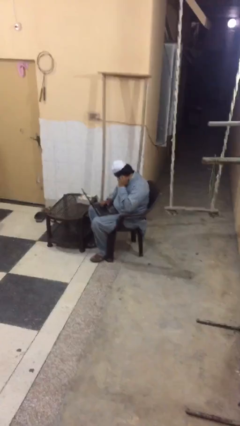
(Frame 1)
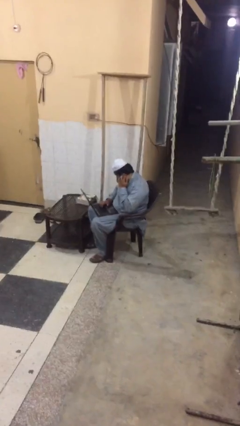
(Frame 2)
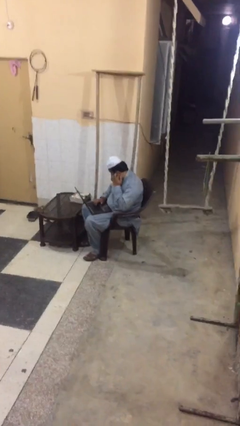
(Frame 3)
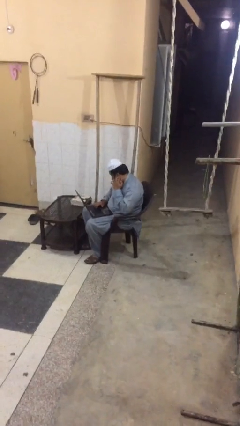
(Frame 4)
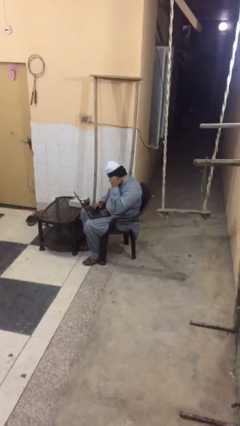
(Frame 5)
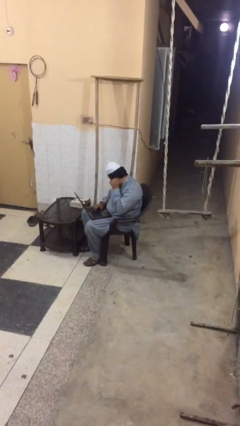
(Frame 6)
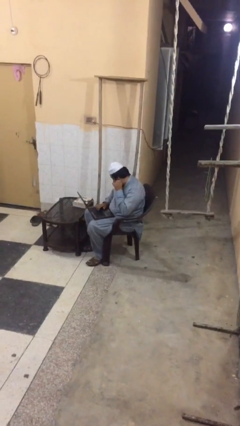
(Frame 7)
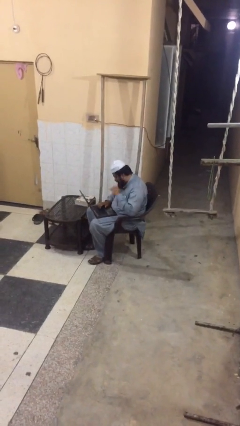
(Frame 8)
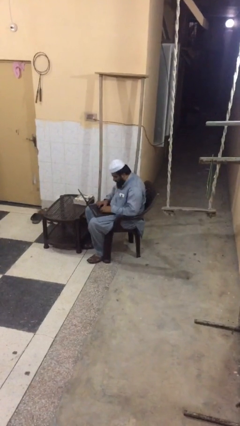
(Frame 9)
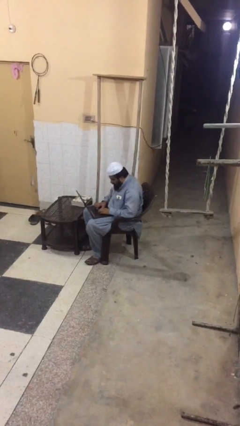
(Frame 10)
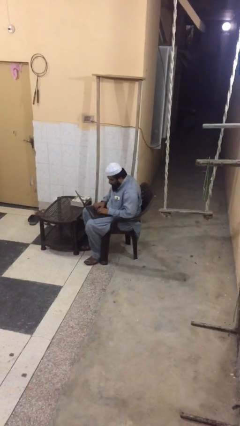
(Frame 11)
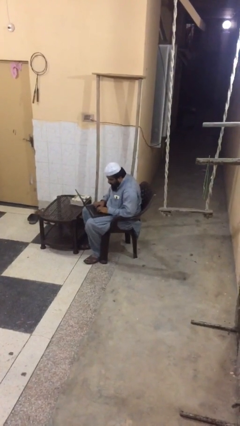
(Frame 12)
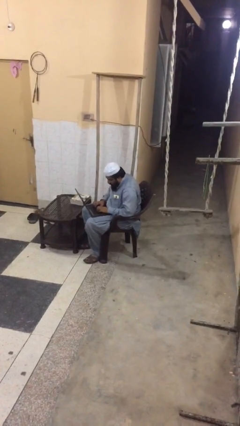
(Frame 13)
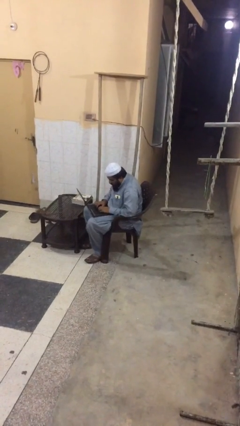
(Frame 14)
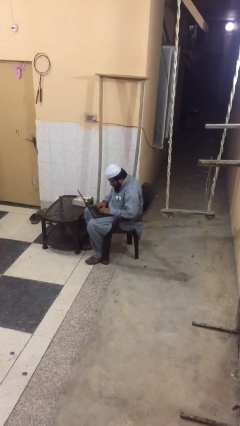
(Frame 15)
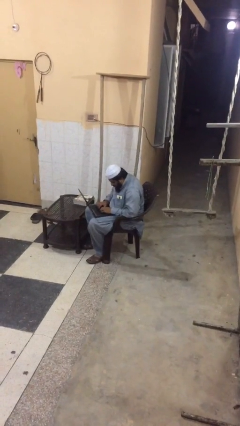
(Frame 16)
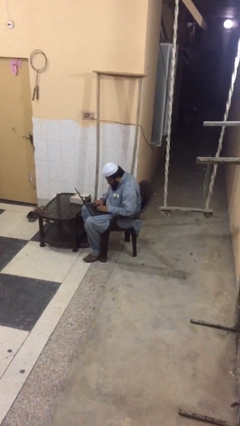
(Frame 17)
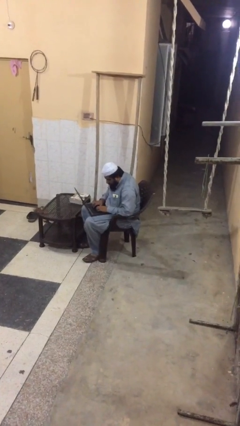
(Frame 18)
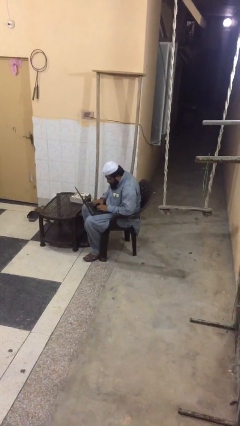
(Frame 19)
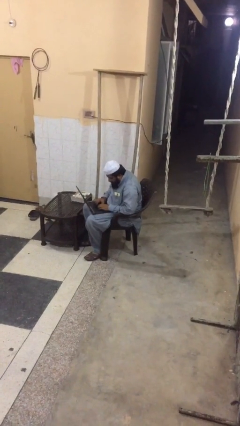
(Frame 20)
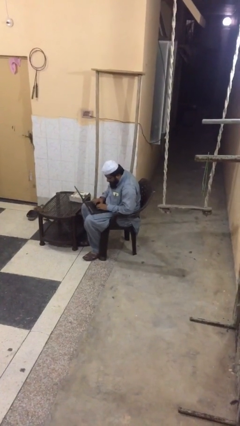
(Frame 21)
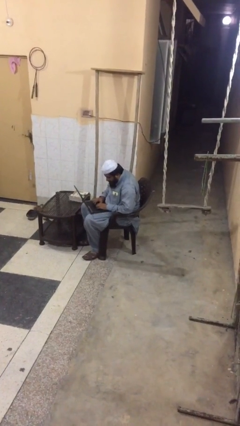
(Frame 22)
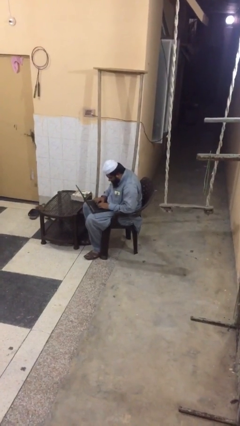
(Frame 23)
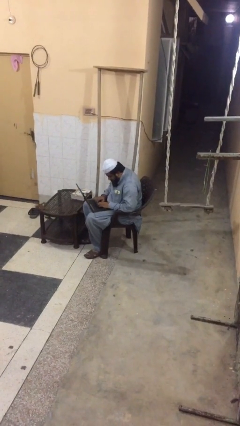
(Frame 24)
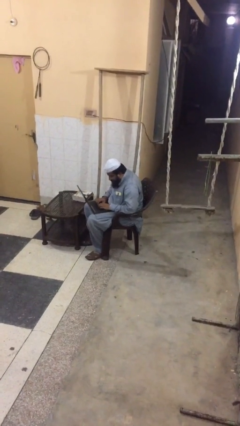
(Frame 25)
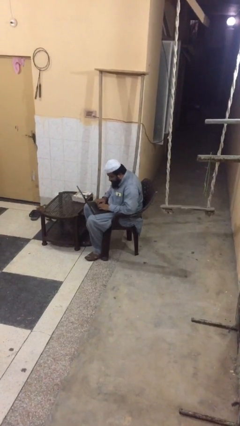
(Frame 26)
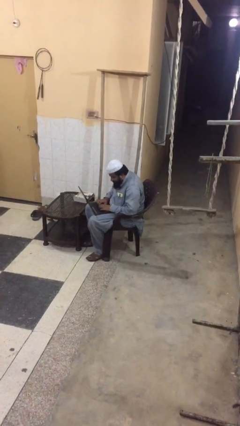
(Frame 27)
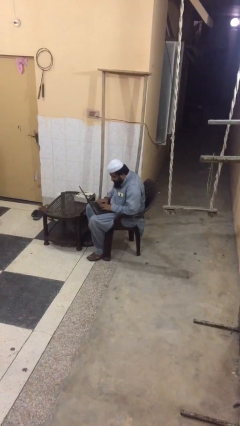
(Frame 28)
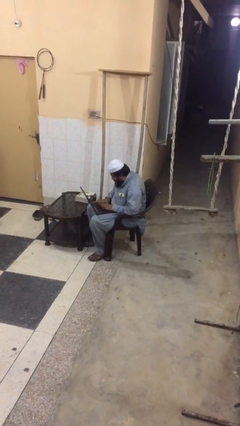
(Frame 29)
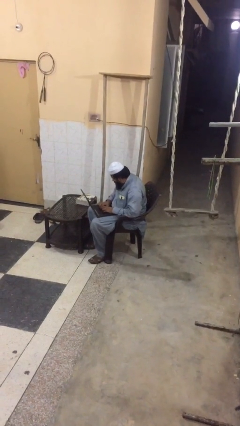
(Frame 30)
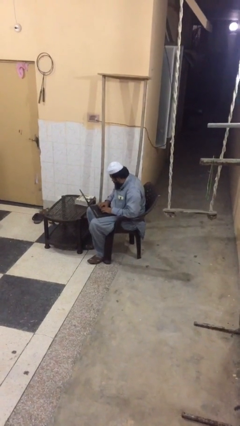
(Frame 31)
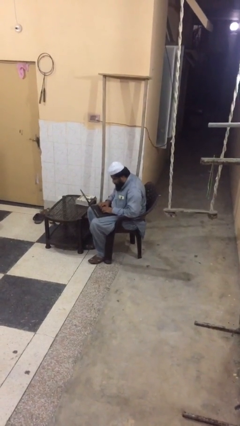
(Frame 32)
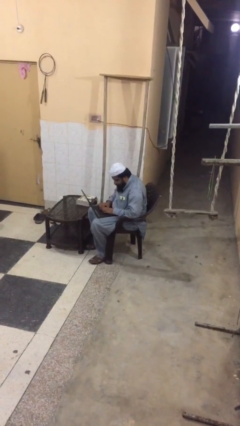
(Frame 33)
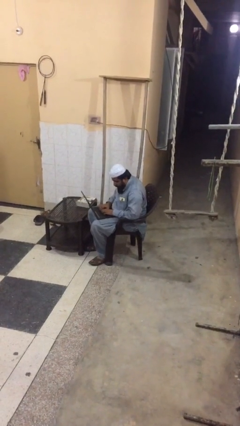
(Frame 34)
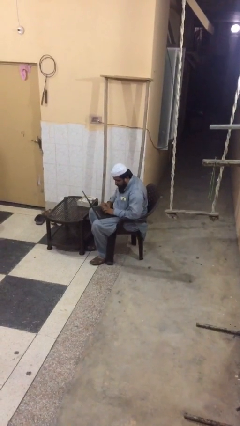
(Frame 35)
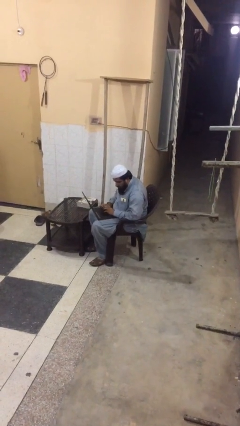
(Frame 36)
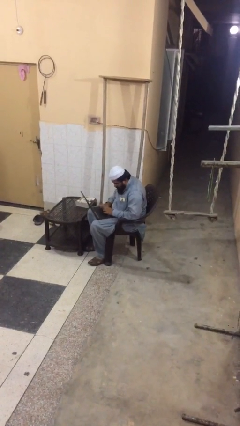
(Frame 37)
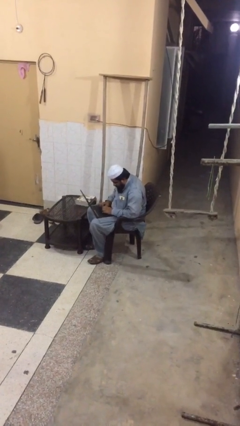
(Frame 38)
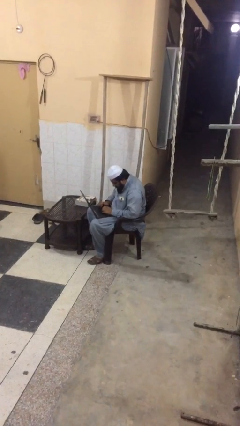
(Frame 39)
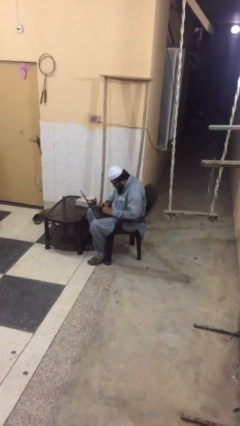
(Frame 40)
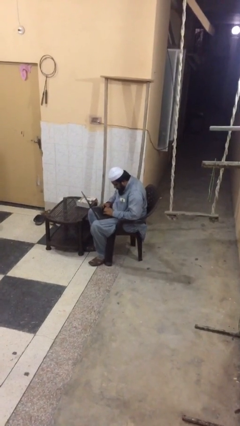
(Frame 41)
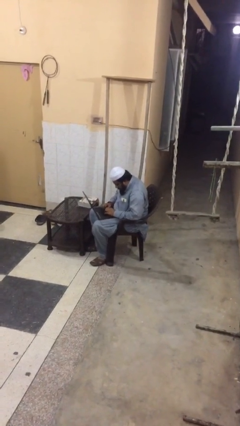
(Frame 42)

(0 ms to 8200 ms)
person interacts with laptop

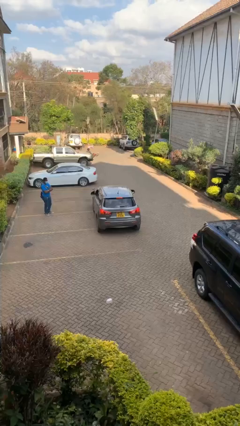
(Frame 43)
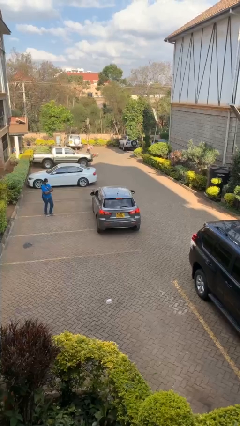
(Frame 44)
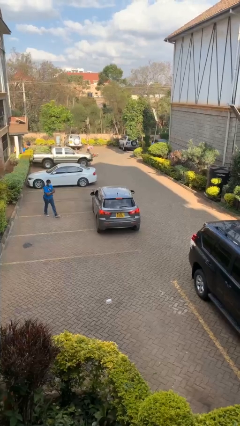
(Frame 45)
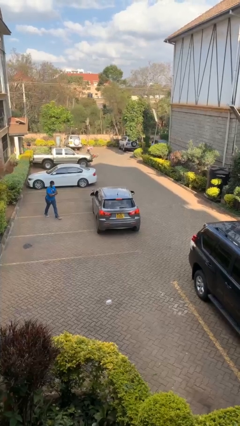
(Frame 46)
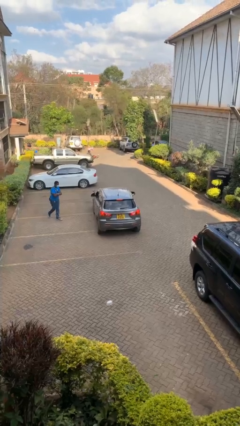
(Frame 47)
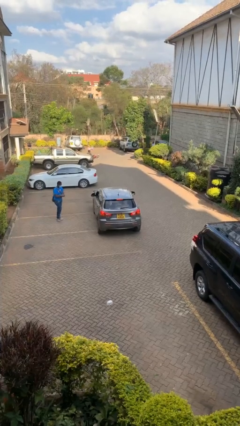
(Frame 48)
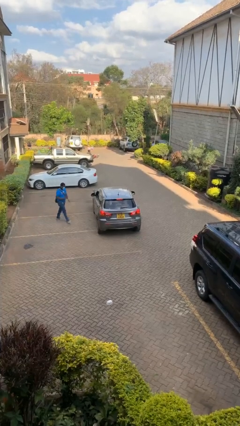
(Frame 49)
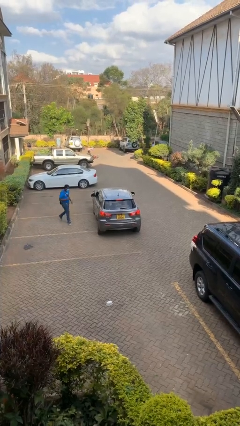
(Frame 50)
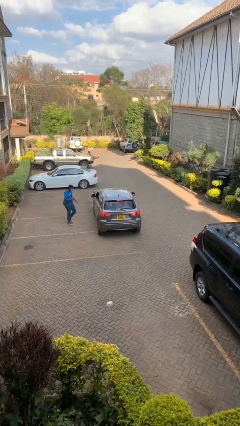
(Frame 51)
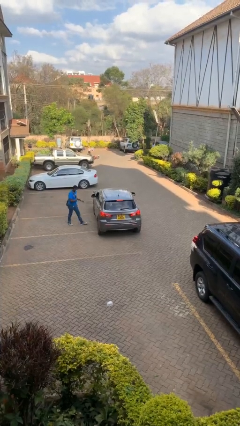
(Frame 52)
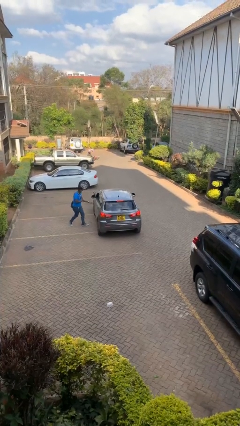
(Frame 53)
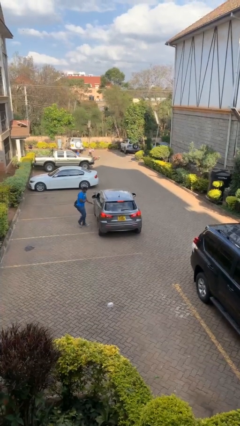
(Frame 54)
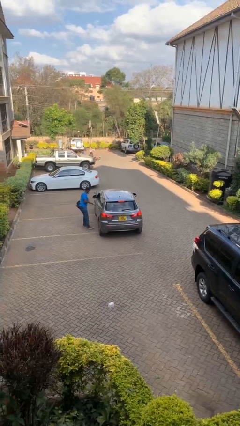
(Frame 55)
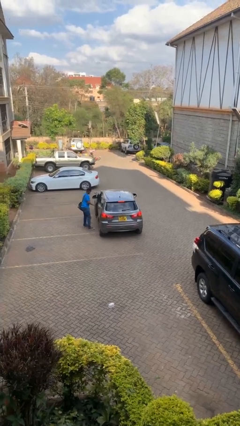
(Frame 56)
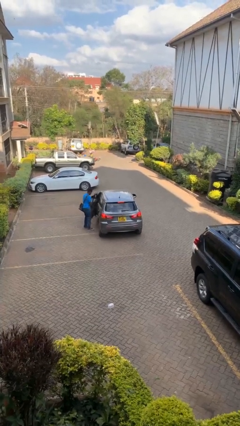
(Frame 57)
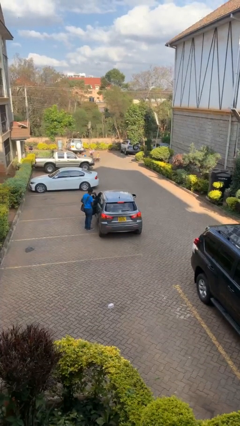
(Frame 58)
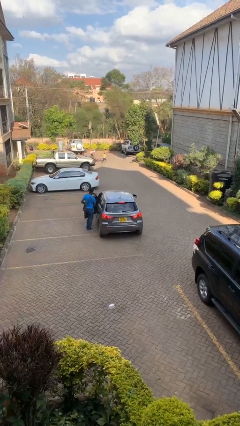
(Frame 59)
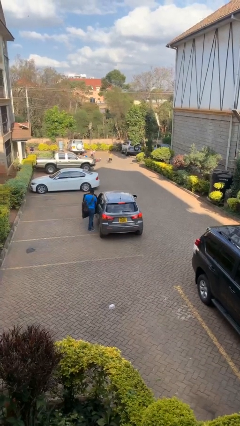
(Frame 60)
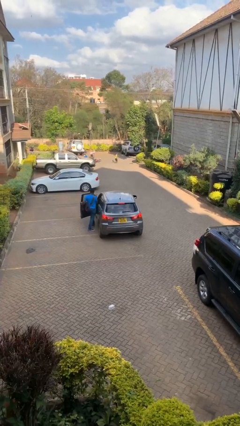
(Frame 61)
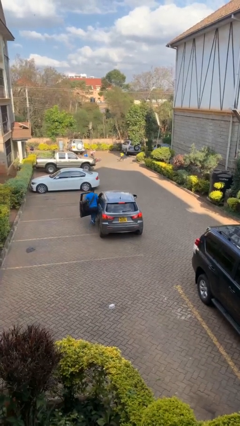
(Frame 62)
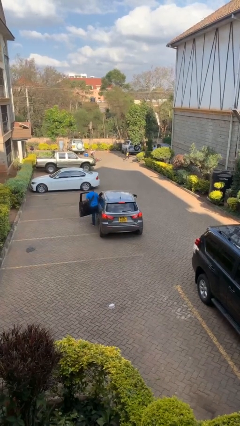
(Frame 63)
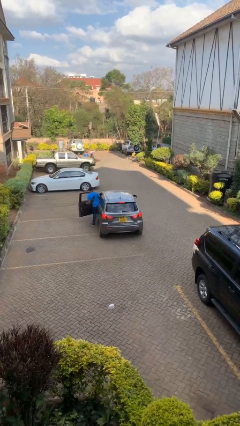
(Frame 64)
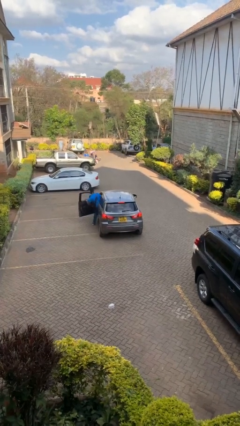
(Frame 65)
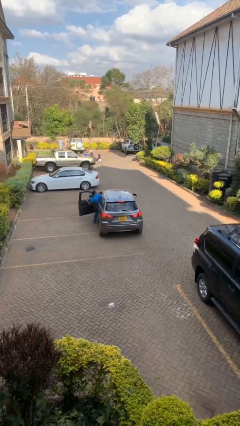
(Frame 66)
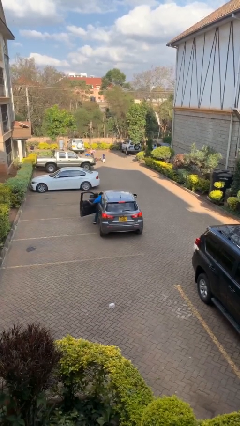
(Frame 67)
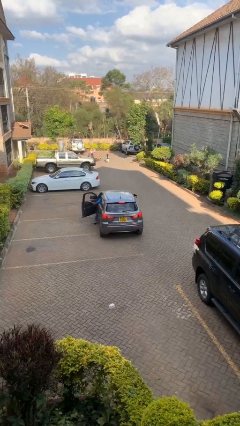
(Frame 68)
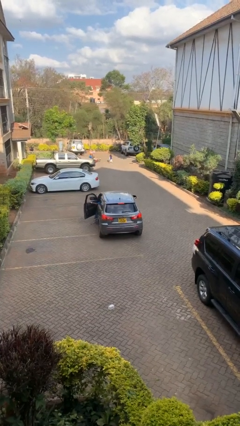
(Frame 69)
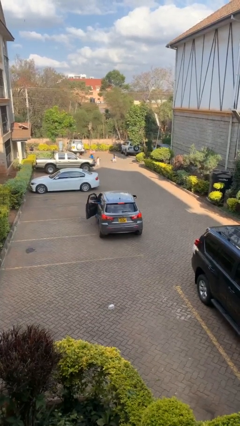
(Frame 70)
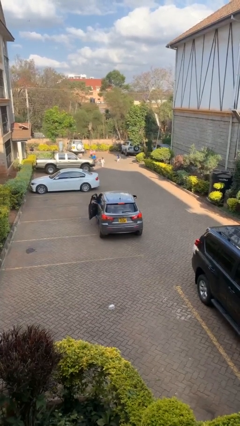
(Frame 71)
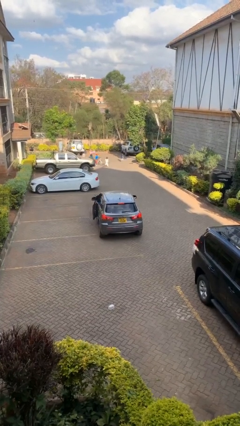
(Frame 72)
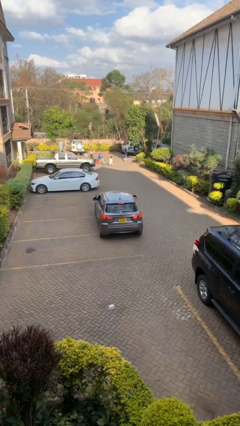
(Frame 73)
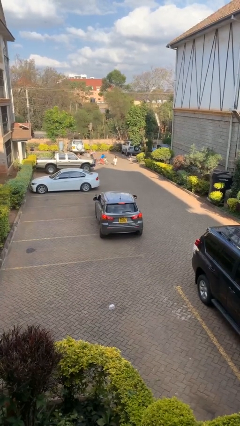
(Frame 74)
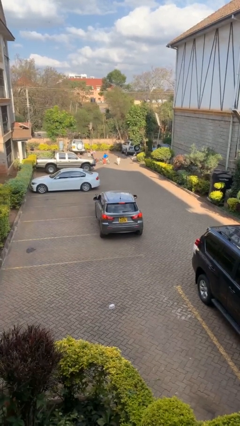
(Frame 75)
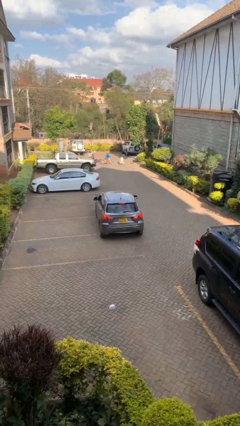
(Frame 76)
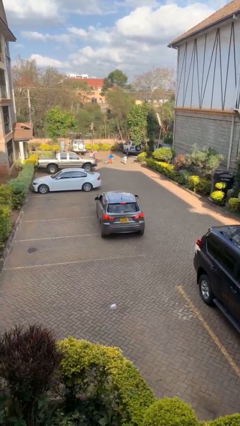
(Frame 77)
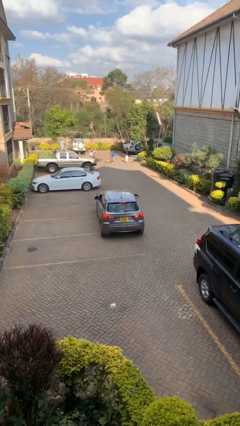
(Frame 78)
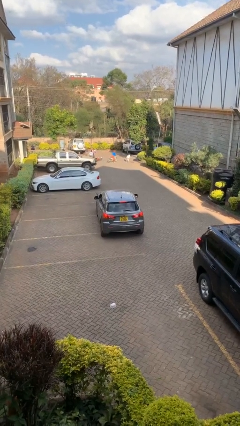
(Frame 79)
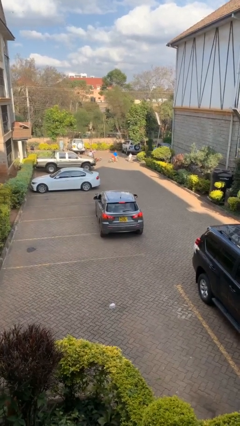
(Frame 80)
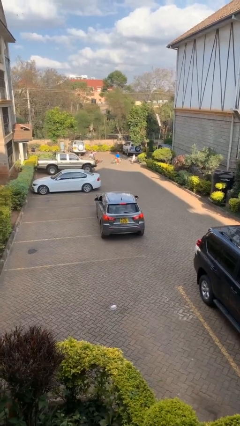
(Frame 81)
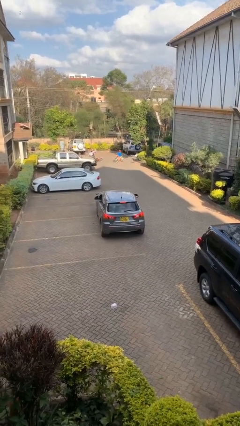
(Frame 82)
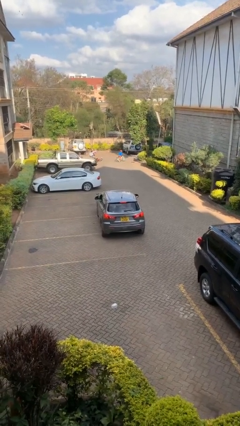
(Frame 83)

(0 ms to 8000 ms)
car picks up person

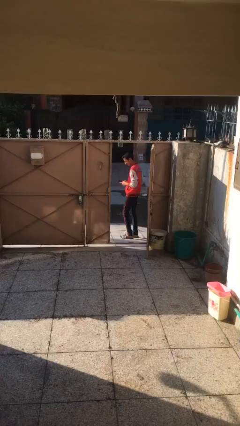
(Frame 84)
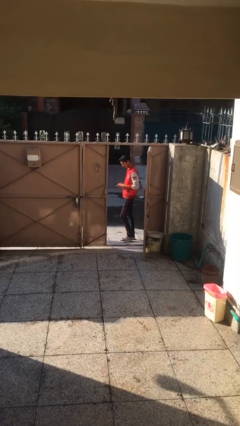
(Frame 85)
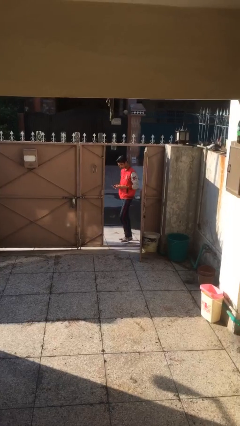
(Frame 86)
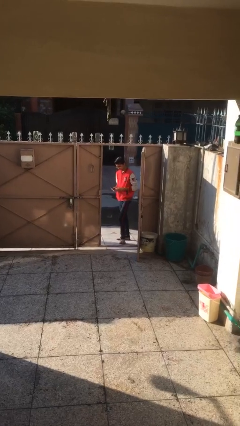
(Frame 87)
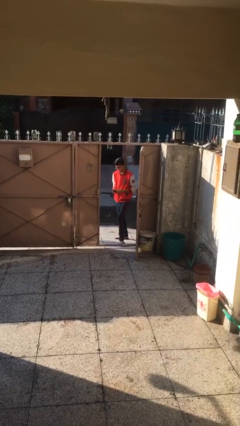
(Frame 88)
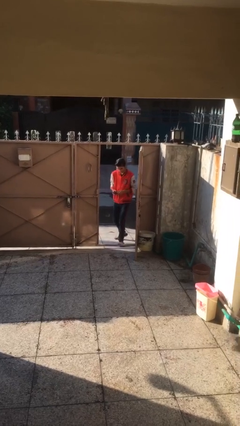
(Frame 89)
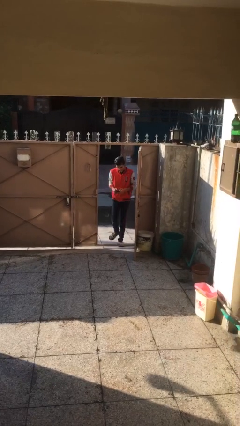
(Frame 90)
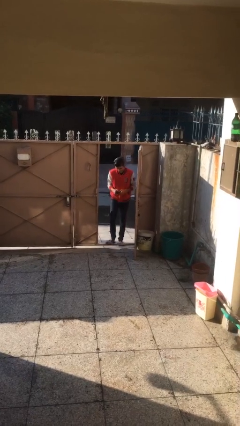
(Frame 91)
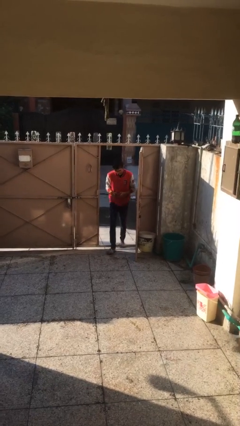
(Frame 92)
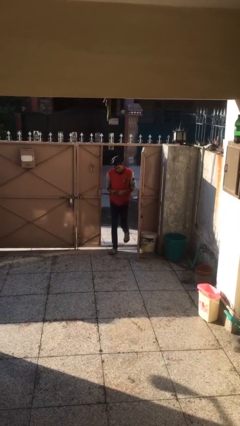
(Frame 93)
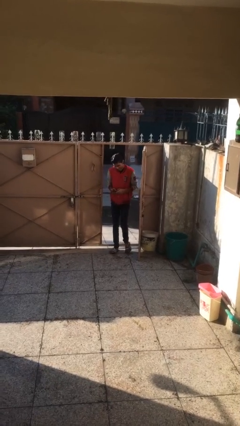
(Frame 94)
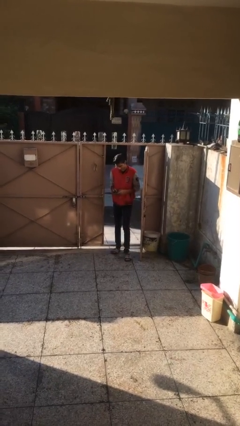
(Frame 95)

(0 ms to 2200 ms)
person enters scene through structure

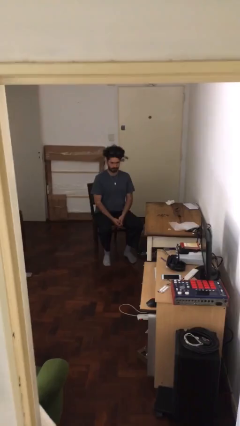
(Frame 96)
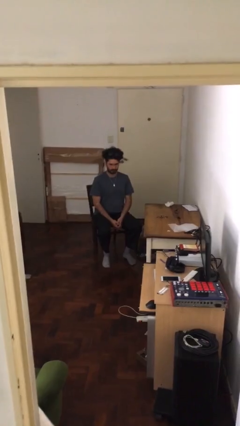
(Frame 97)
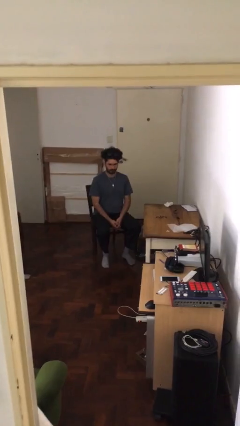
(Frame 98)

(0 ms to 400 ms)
person puts feet up
